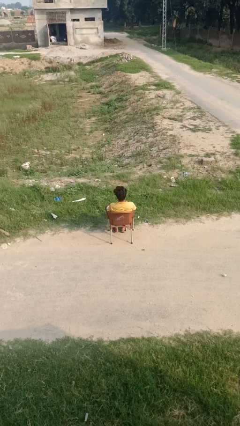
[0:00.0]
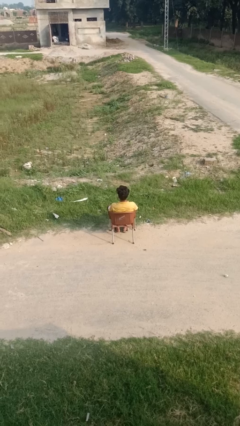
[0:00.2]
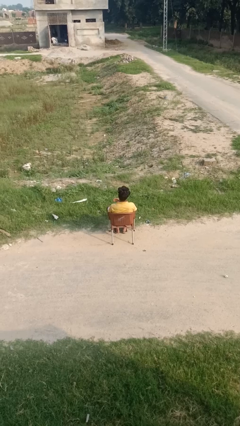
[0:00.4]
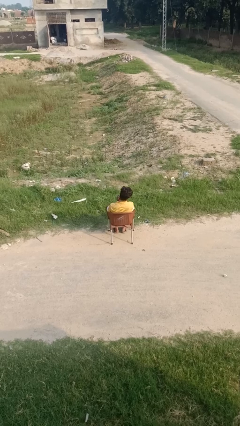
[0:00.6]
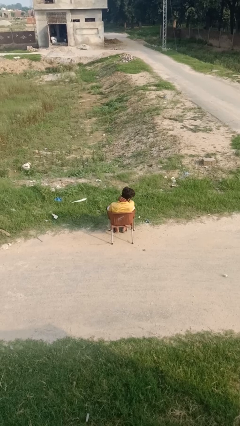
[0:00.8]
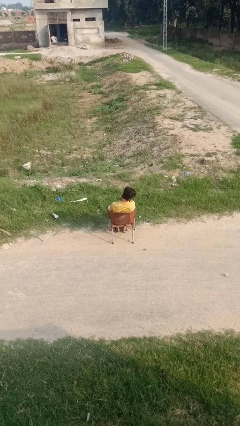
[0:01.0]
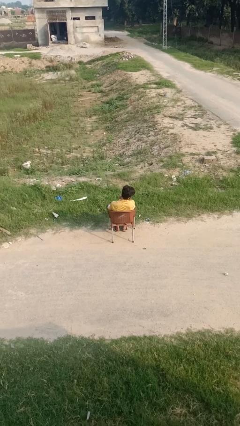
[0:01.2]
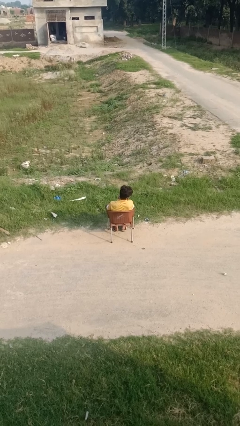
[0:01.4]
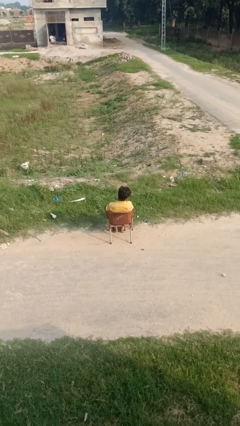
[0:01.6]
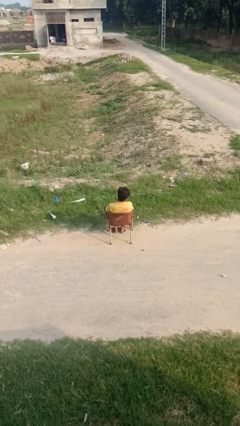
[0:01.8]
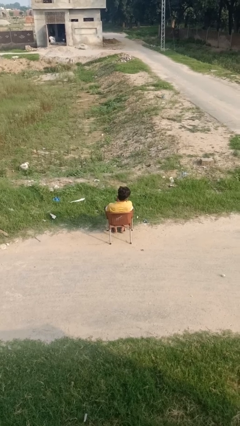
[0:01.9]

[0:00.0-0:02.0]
person rubs neck

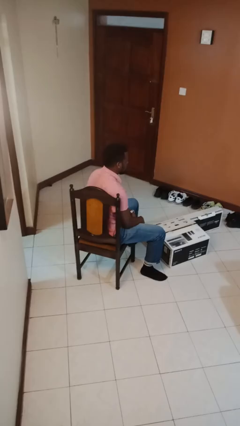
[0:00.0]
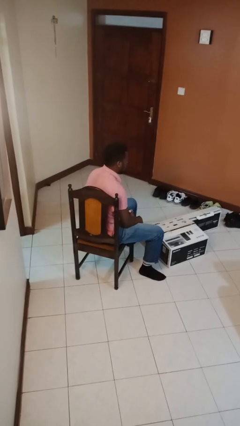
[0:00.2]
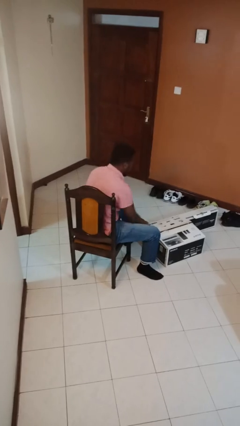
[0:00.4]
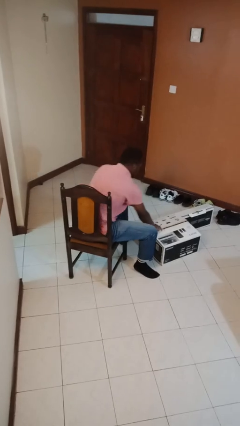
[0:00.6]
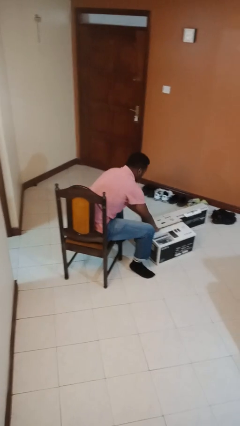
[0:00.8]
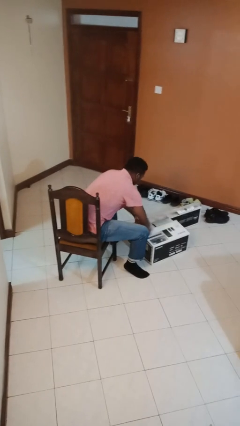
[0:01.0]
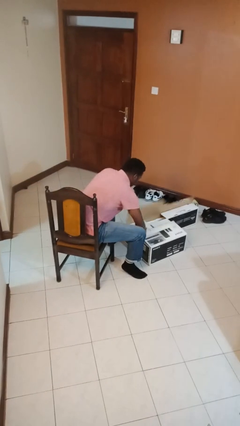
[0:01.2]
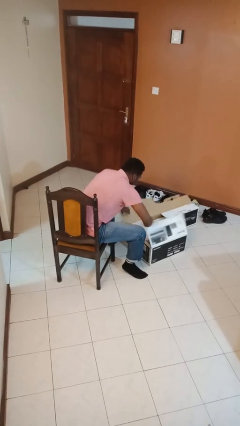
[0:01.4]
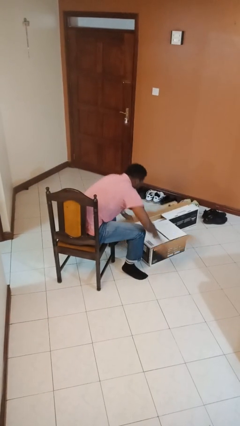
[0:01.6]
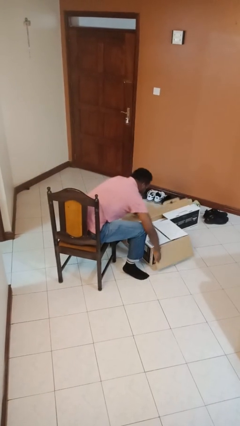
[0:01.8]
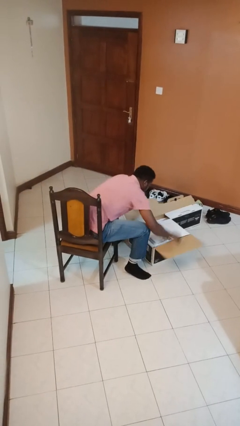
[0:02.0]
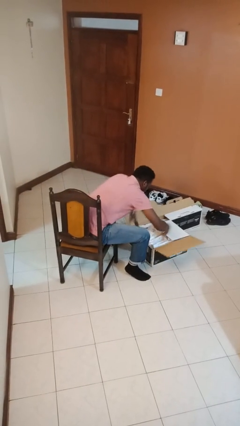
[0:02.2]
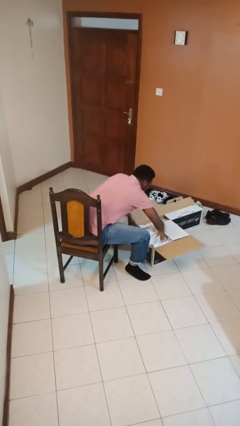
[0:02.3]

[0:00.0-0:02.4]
person opens box

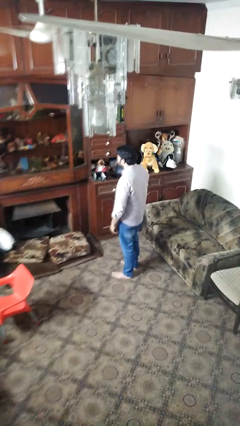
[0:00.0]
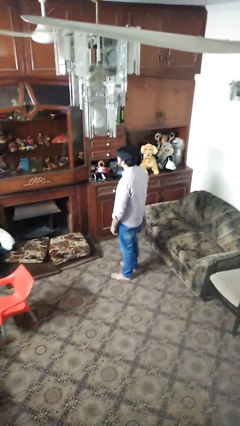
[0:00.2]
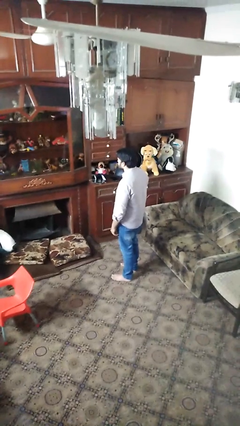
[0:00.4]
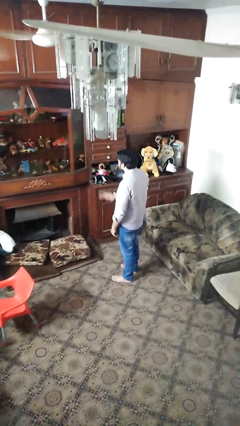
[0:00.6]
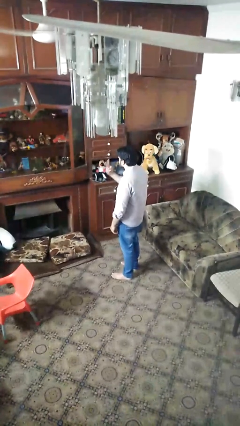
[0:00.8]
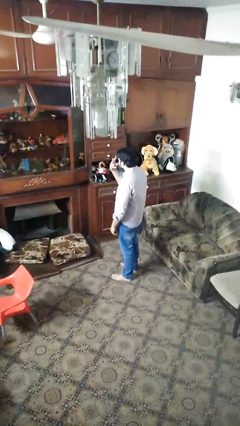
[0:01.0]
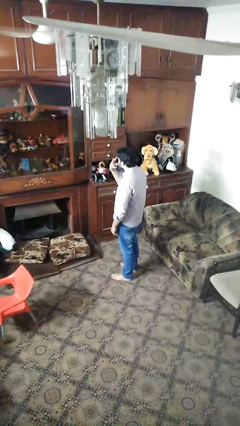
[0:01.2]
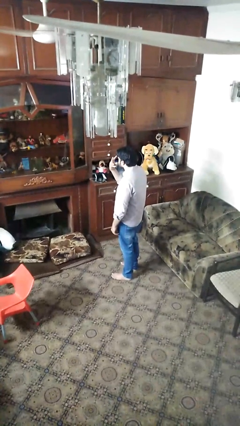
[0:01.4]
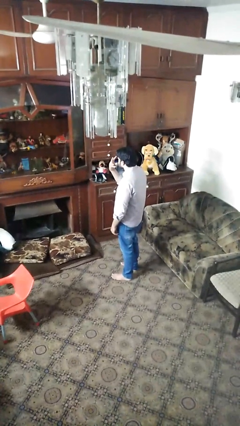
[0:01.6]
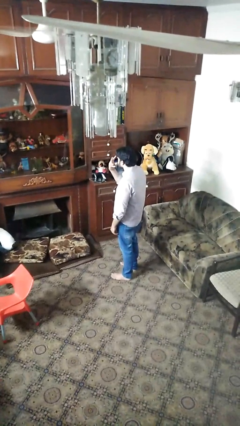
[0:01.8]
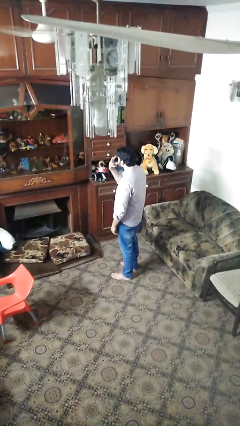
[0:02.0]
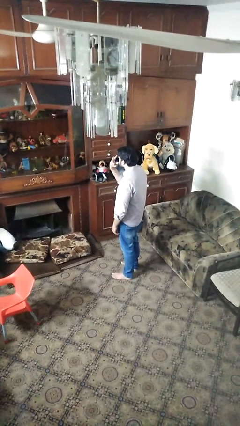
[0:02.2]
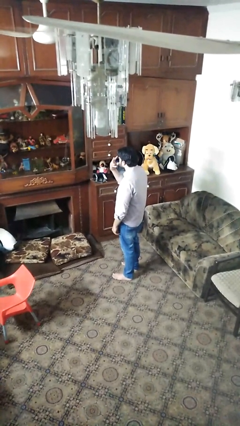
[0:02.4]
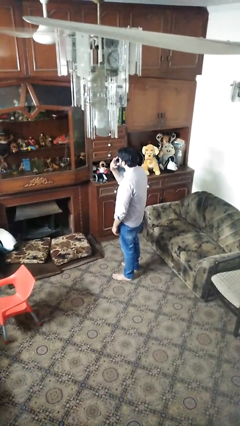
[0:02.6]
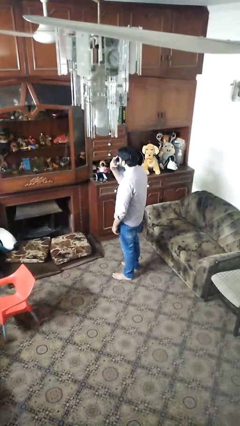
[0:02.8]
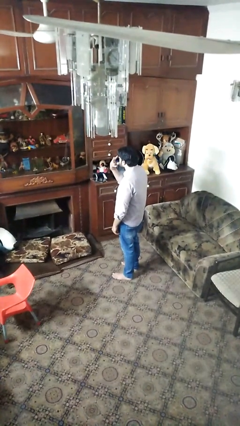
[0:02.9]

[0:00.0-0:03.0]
person gestures watch closely

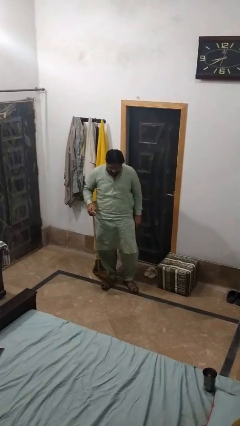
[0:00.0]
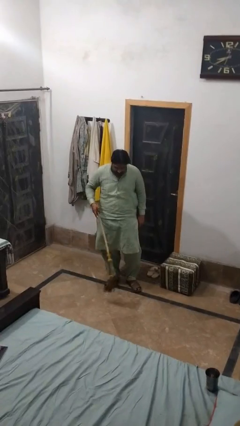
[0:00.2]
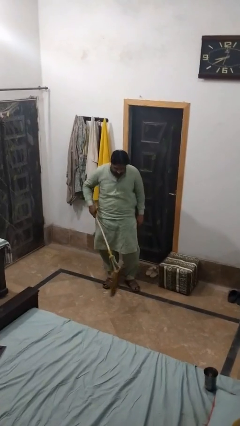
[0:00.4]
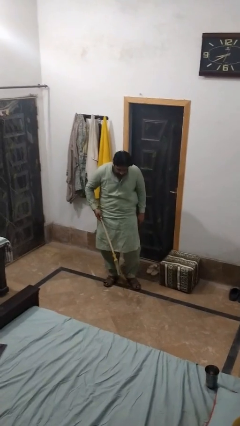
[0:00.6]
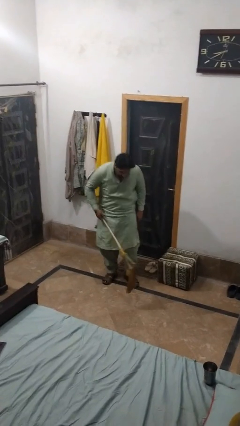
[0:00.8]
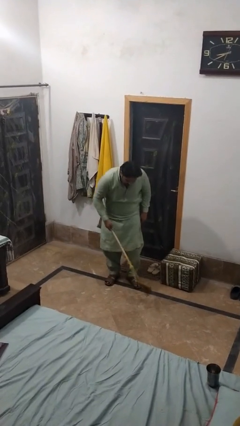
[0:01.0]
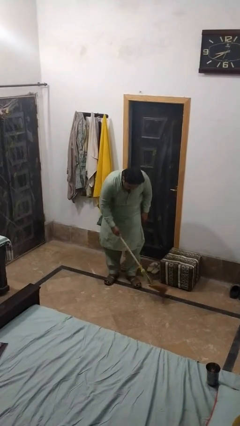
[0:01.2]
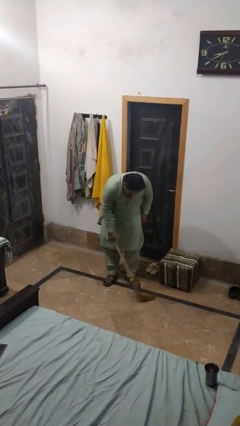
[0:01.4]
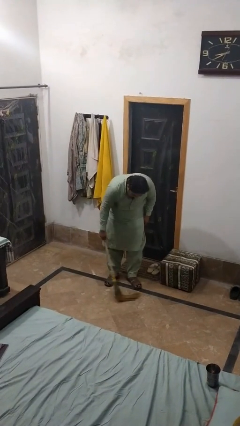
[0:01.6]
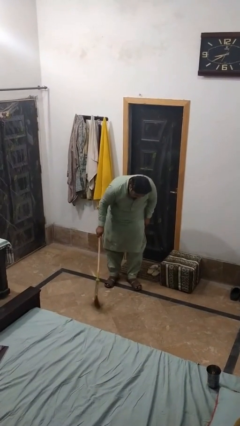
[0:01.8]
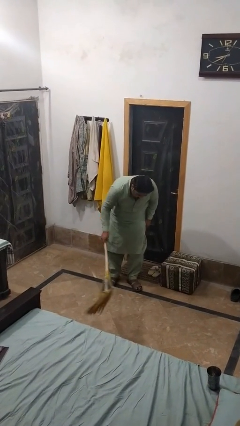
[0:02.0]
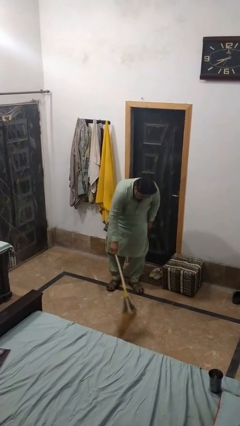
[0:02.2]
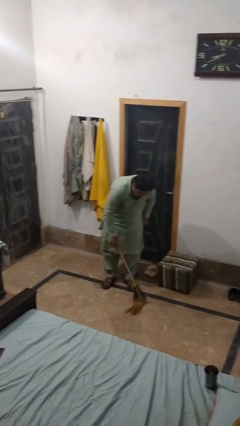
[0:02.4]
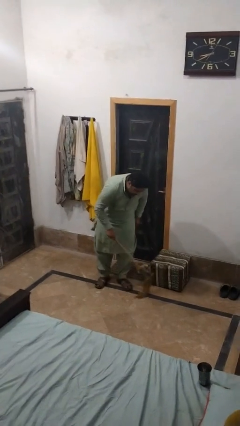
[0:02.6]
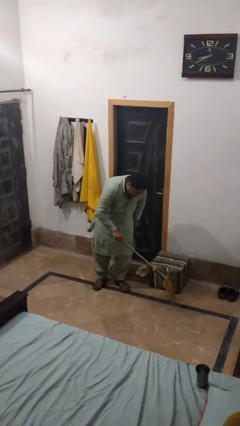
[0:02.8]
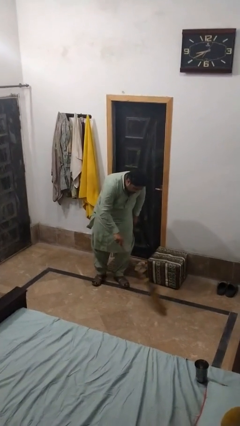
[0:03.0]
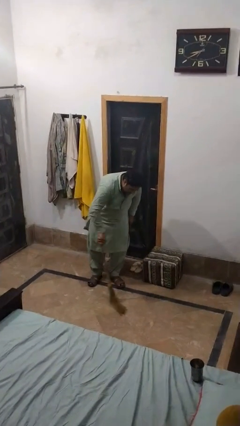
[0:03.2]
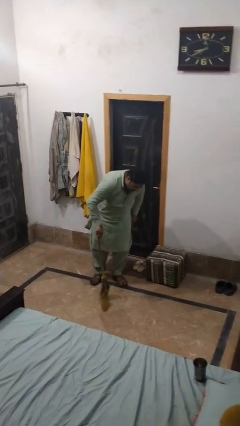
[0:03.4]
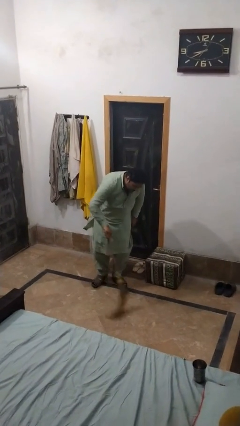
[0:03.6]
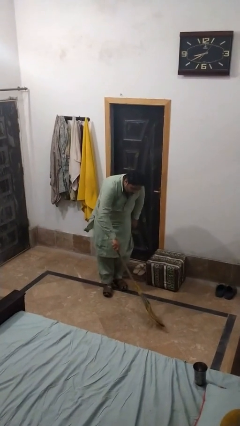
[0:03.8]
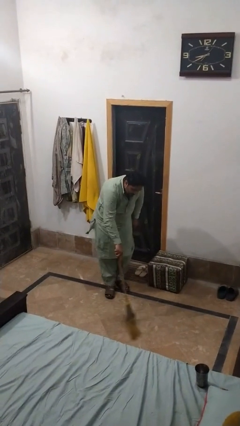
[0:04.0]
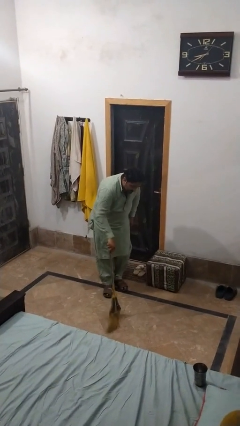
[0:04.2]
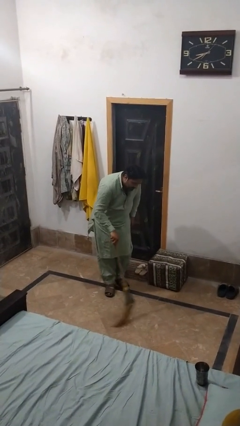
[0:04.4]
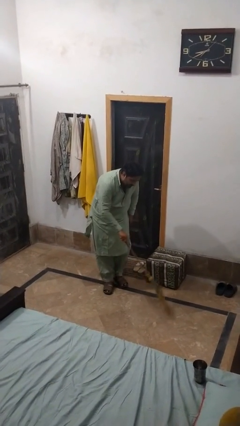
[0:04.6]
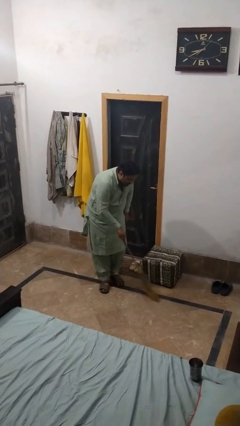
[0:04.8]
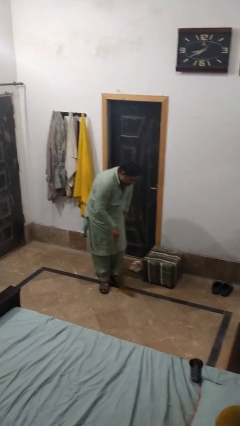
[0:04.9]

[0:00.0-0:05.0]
person mops

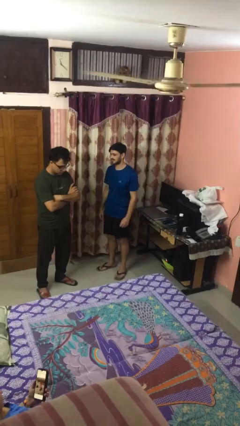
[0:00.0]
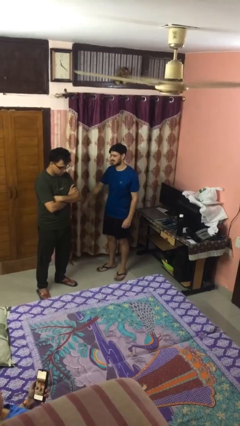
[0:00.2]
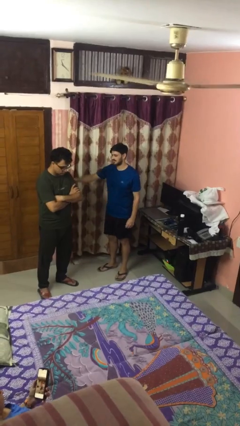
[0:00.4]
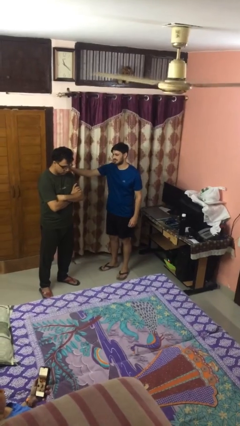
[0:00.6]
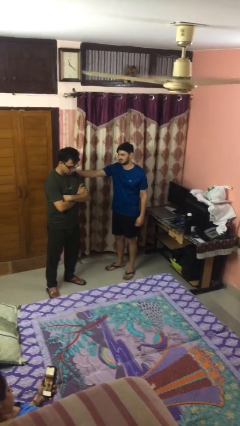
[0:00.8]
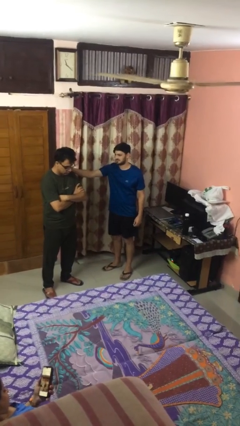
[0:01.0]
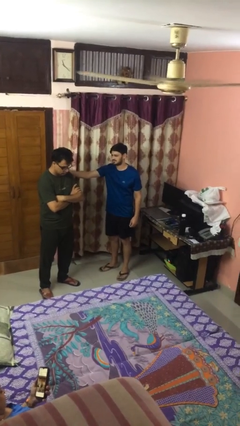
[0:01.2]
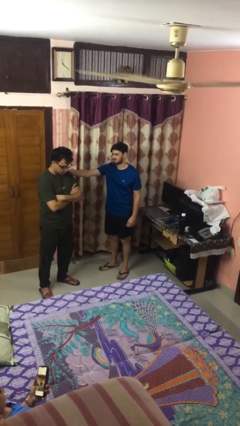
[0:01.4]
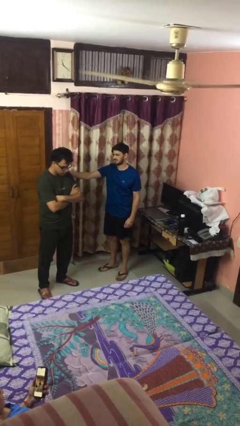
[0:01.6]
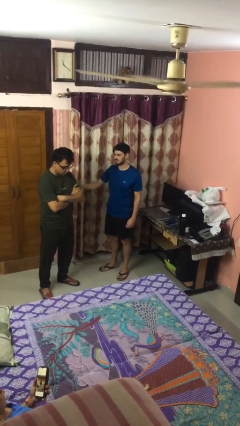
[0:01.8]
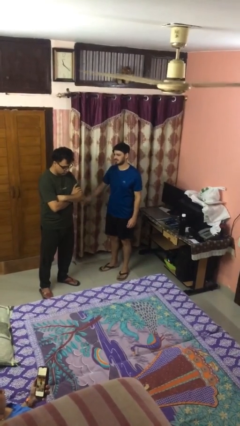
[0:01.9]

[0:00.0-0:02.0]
person pounds shoulders of person

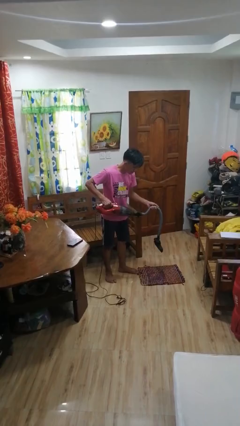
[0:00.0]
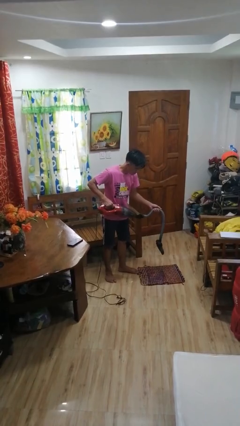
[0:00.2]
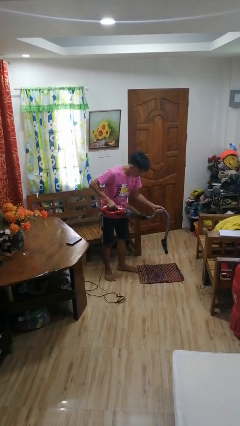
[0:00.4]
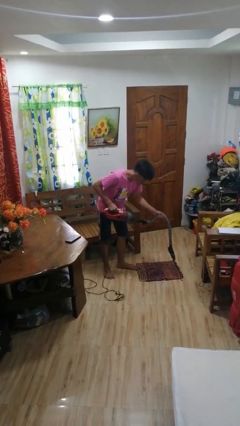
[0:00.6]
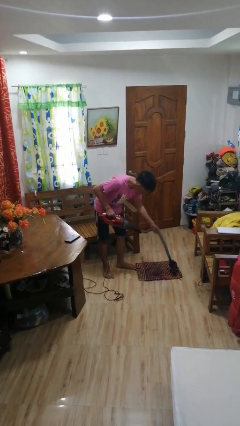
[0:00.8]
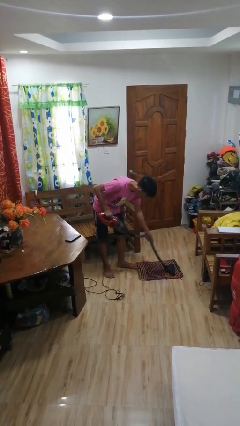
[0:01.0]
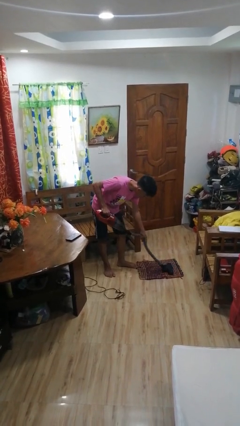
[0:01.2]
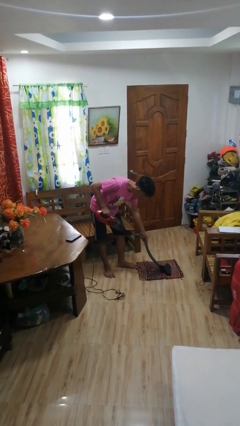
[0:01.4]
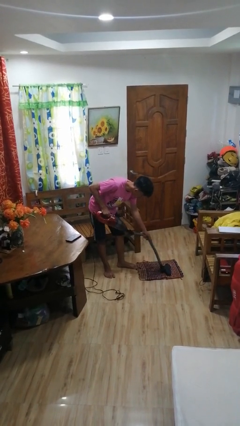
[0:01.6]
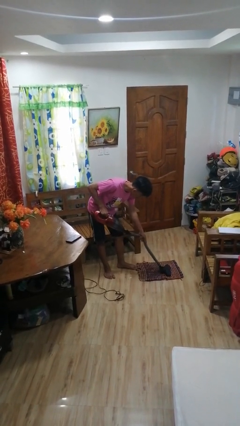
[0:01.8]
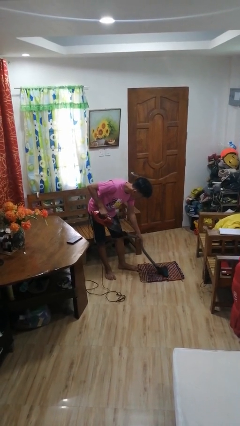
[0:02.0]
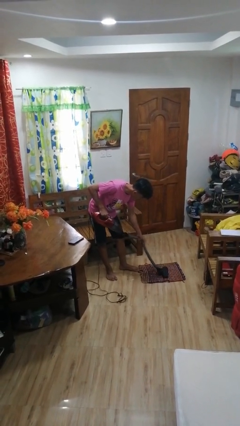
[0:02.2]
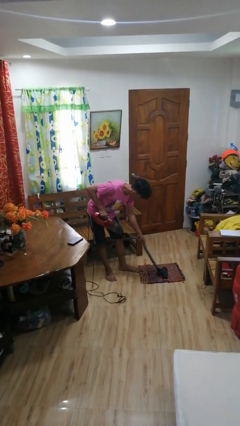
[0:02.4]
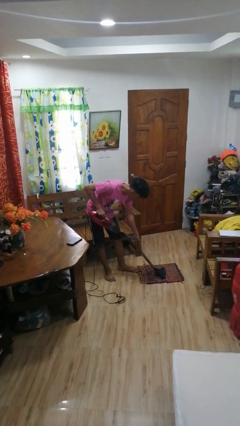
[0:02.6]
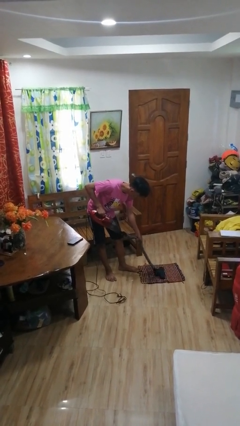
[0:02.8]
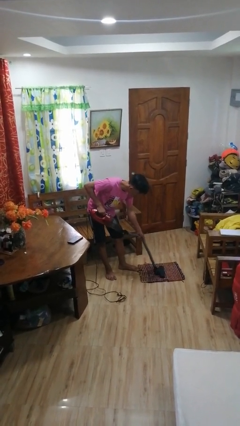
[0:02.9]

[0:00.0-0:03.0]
person vacuums carpet
